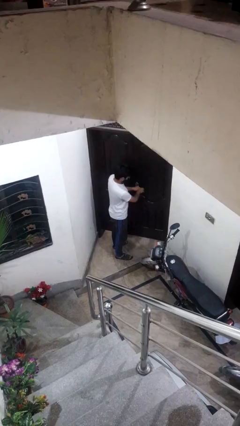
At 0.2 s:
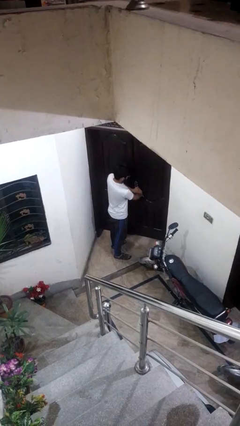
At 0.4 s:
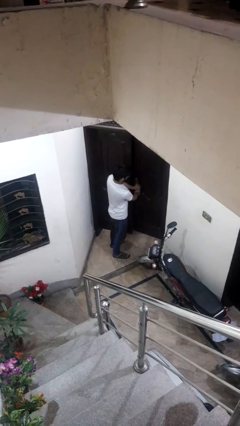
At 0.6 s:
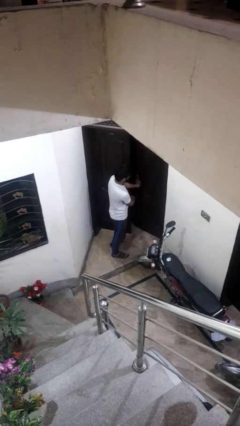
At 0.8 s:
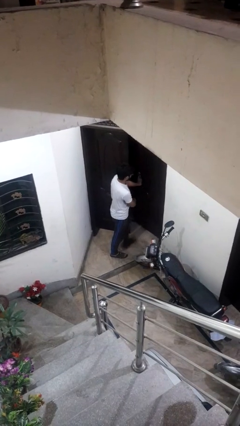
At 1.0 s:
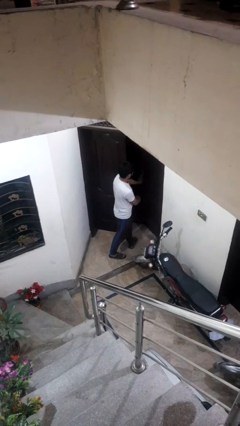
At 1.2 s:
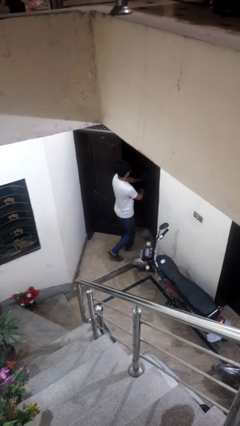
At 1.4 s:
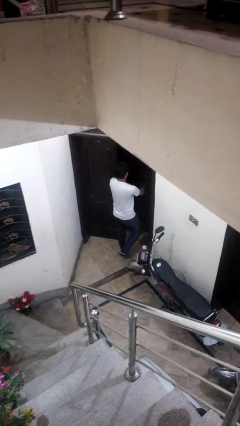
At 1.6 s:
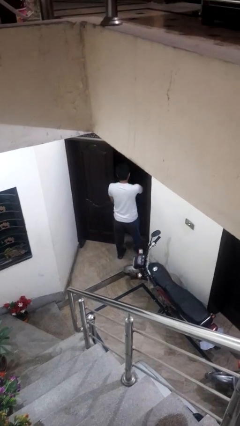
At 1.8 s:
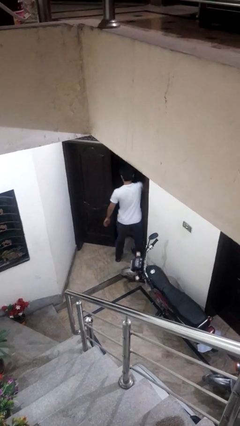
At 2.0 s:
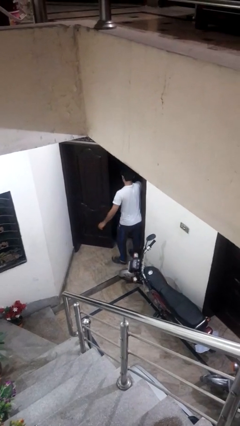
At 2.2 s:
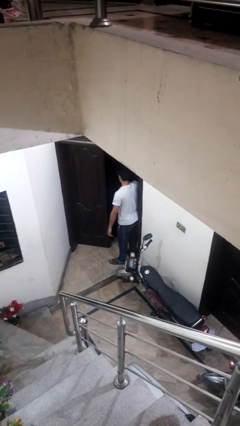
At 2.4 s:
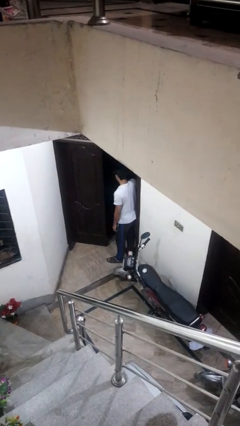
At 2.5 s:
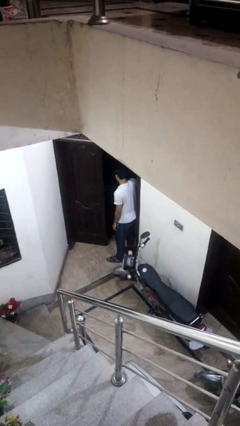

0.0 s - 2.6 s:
person opens facility door

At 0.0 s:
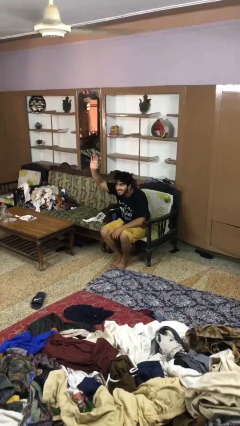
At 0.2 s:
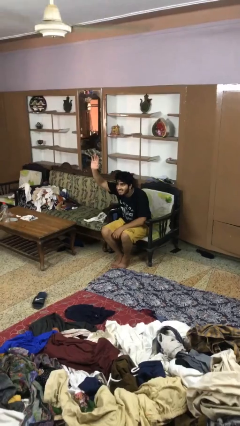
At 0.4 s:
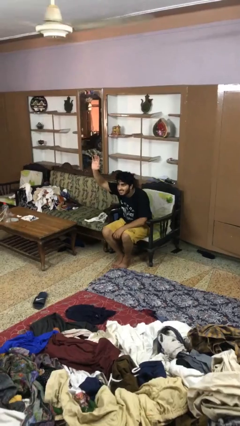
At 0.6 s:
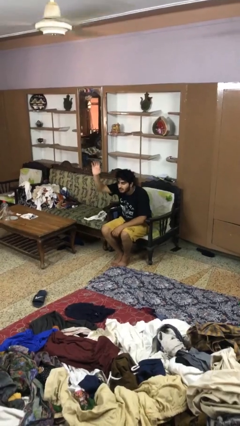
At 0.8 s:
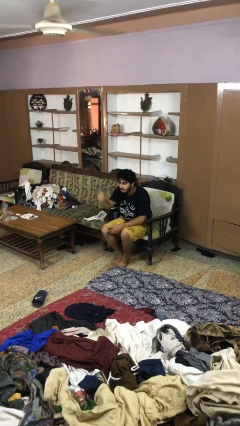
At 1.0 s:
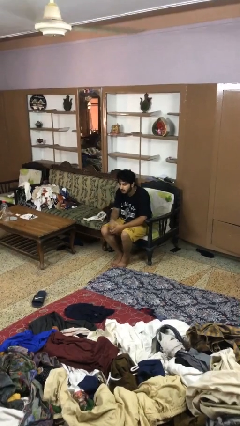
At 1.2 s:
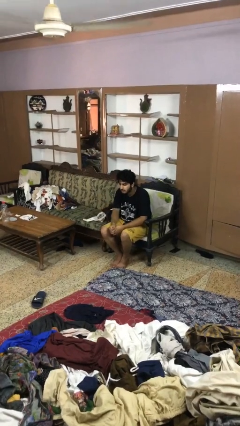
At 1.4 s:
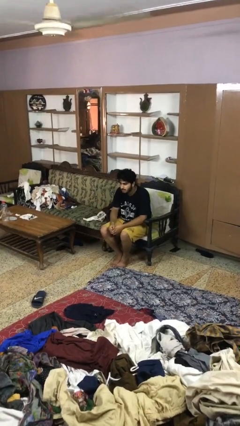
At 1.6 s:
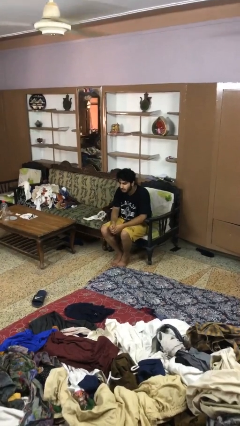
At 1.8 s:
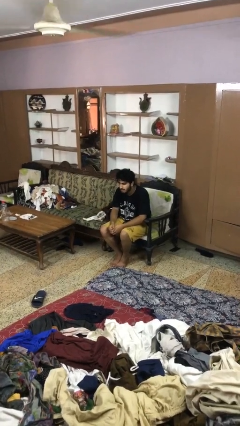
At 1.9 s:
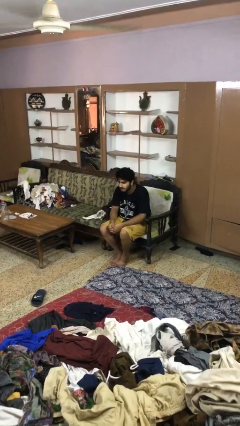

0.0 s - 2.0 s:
person gestures lower hand

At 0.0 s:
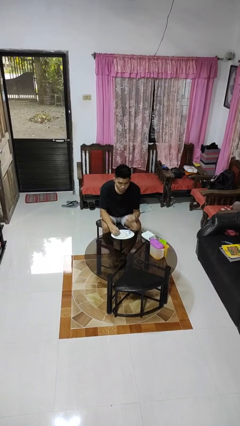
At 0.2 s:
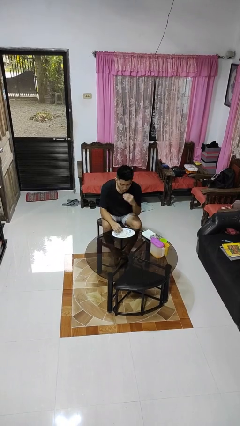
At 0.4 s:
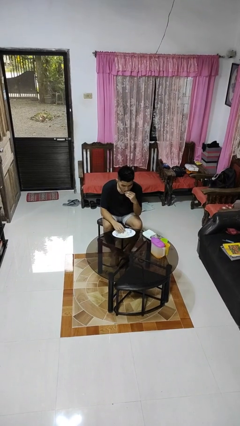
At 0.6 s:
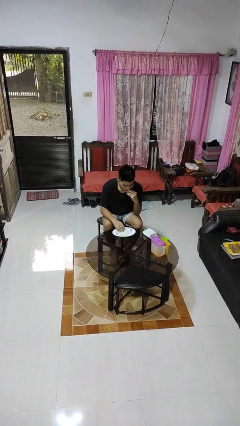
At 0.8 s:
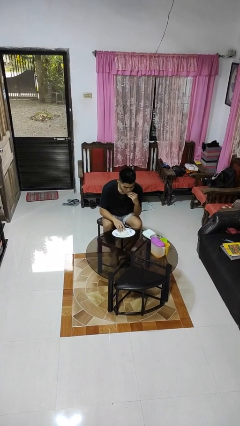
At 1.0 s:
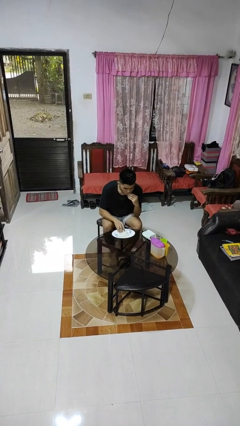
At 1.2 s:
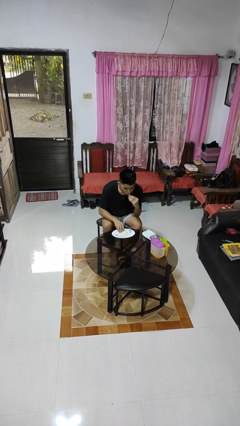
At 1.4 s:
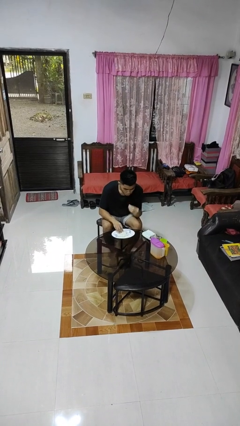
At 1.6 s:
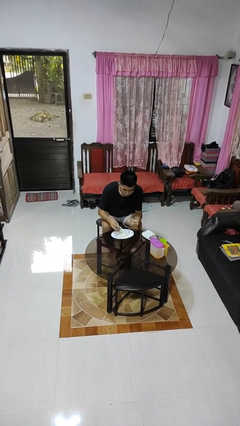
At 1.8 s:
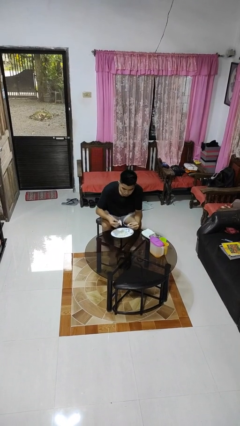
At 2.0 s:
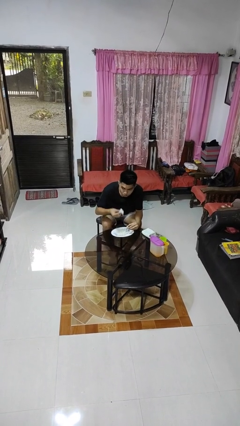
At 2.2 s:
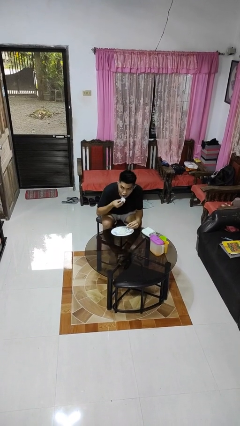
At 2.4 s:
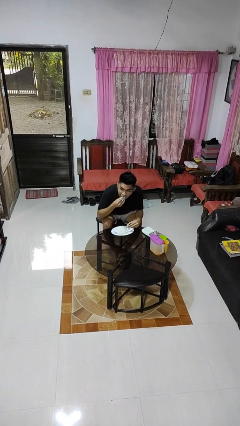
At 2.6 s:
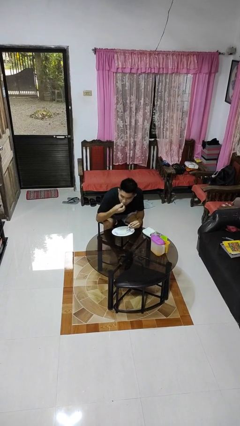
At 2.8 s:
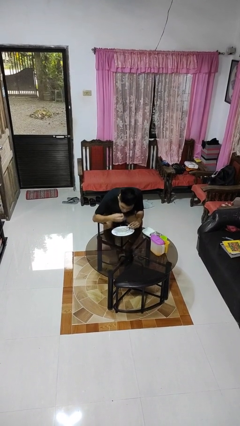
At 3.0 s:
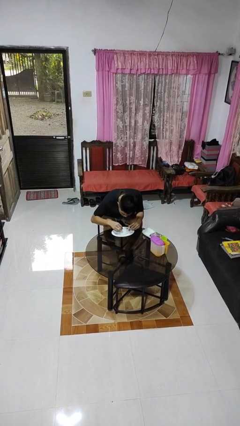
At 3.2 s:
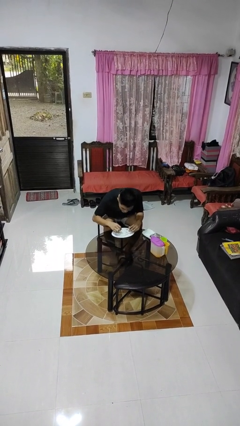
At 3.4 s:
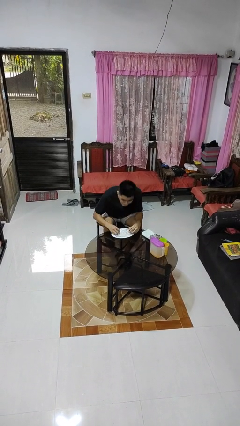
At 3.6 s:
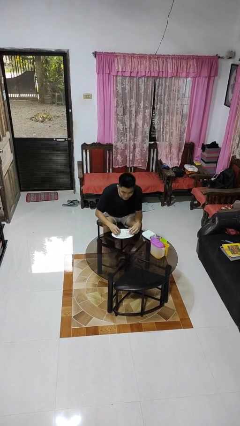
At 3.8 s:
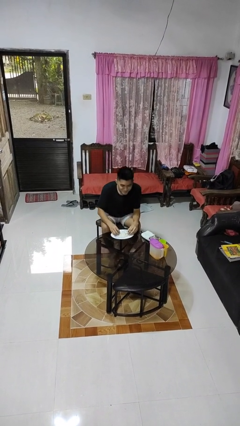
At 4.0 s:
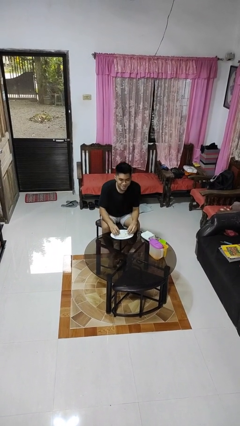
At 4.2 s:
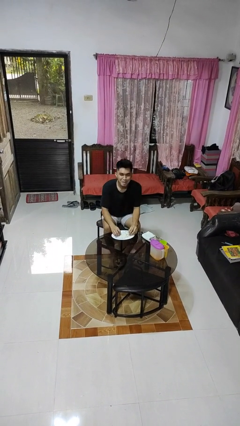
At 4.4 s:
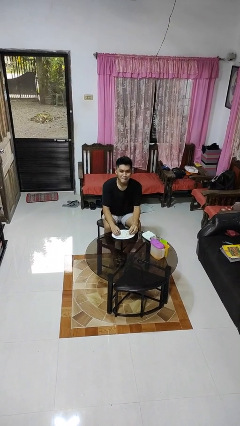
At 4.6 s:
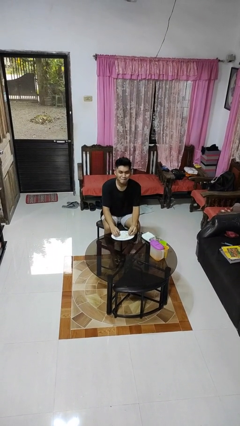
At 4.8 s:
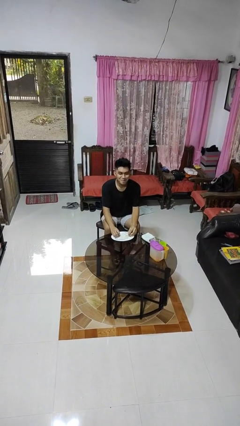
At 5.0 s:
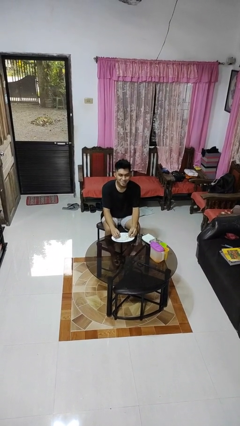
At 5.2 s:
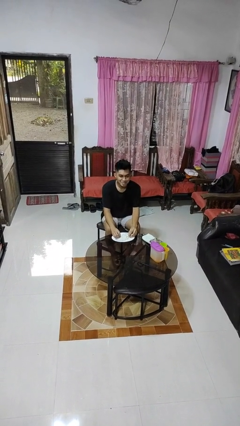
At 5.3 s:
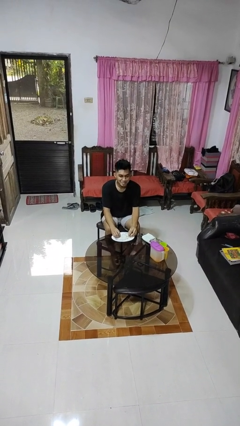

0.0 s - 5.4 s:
person eats with hands

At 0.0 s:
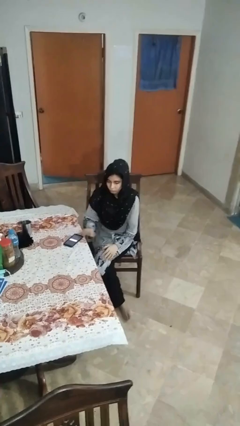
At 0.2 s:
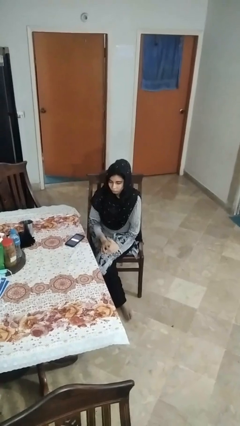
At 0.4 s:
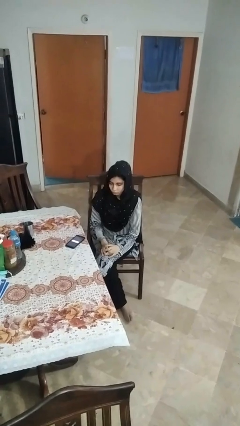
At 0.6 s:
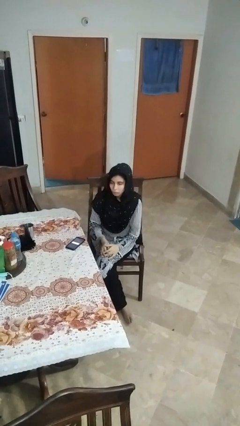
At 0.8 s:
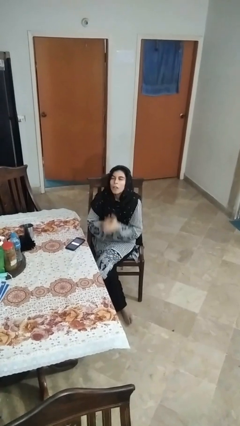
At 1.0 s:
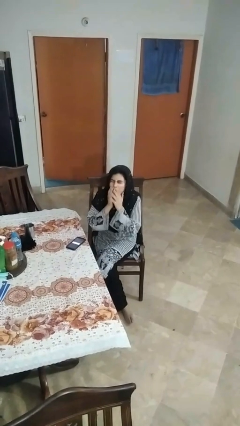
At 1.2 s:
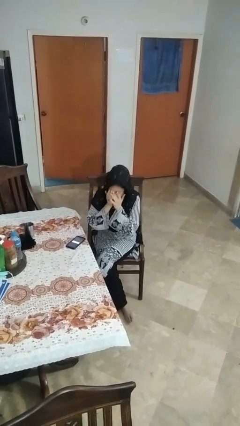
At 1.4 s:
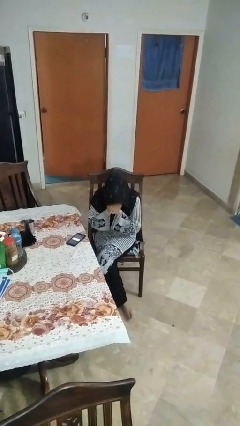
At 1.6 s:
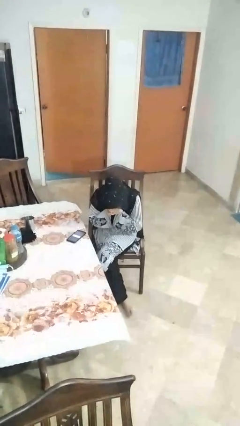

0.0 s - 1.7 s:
person sneezes into hand

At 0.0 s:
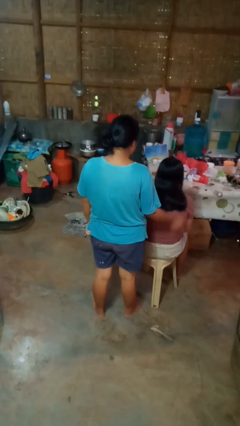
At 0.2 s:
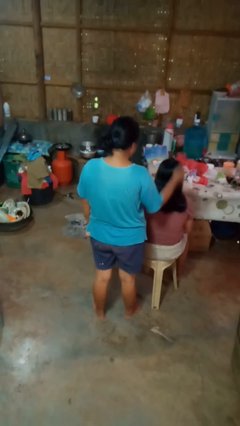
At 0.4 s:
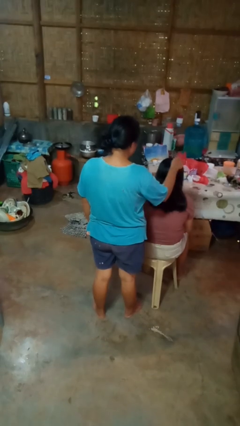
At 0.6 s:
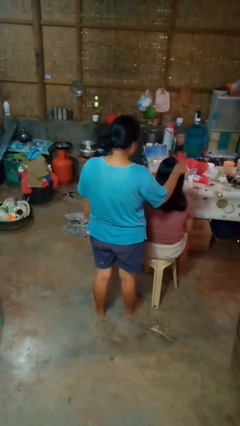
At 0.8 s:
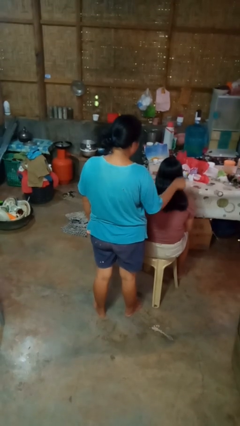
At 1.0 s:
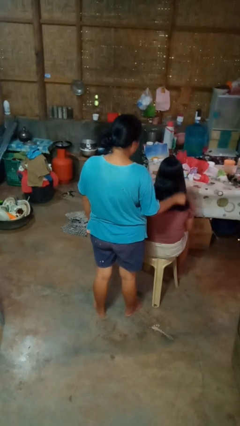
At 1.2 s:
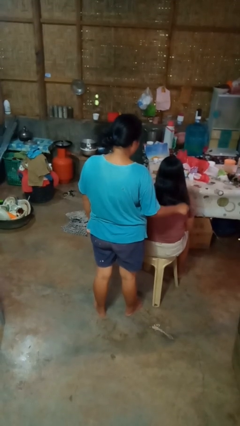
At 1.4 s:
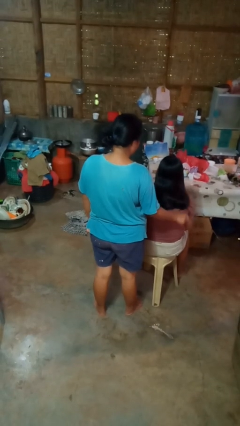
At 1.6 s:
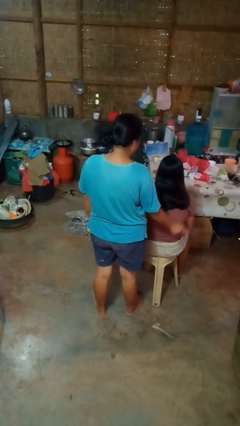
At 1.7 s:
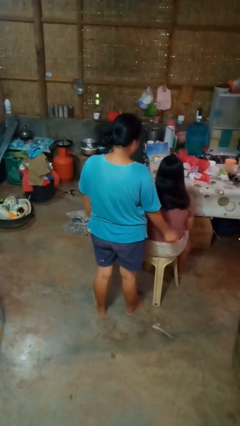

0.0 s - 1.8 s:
person brushes hair of person

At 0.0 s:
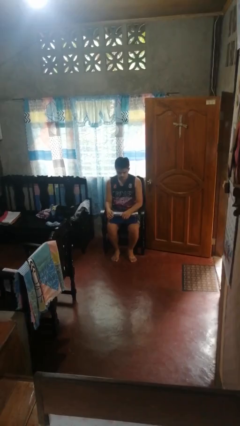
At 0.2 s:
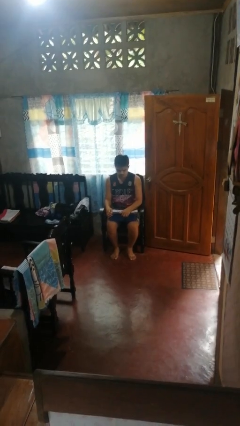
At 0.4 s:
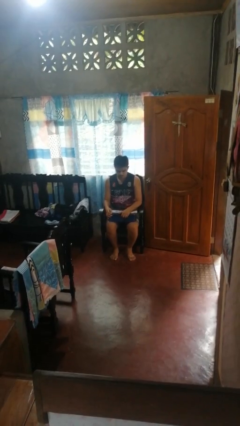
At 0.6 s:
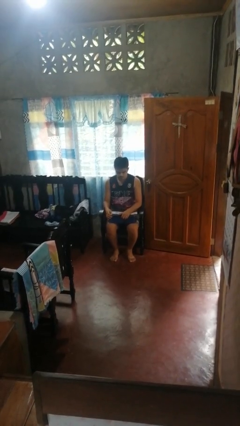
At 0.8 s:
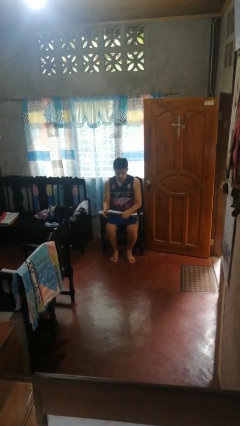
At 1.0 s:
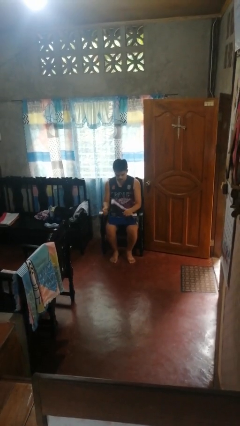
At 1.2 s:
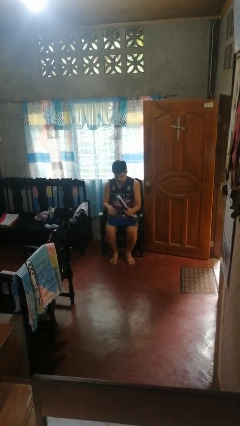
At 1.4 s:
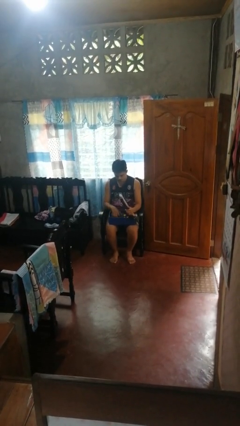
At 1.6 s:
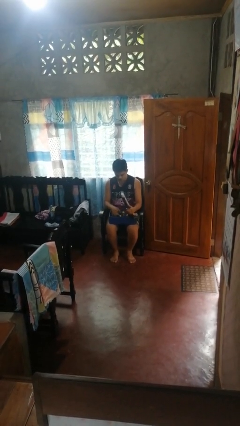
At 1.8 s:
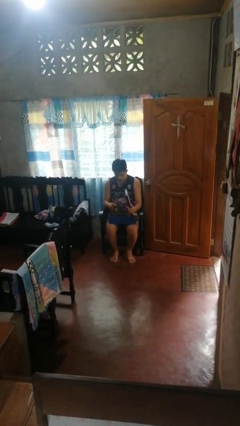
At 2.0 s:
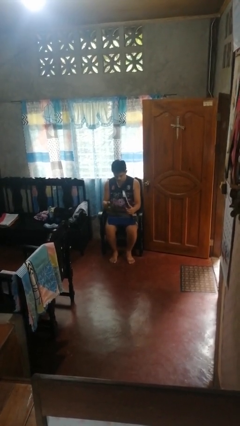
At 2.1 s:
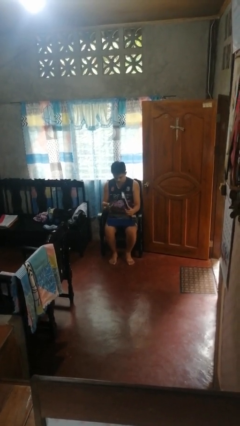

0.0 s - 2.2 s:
person takes object from box

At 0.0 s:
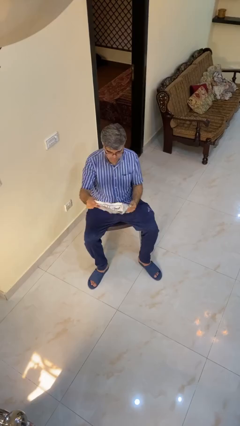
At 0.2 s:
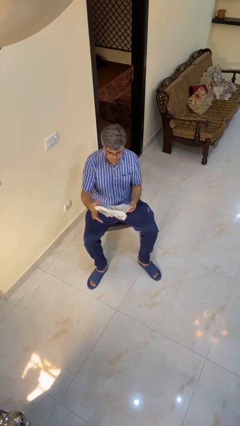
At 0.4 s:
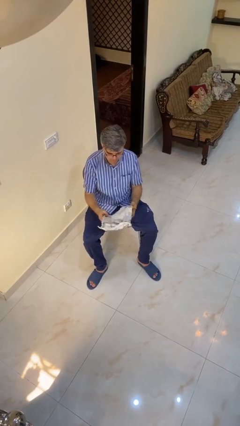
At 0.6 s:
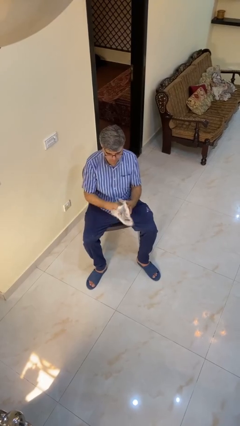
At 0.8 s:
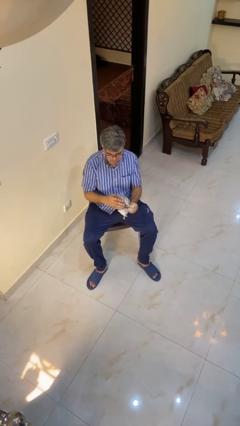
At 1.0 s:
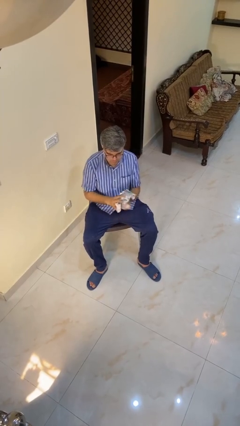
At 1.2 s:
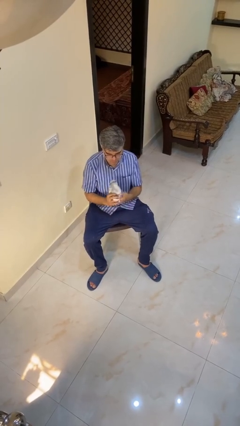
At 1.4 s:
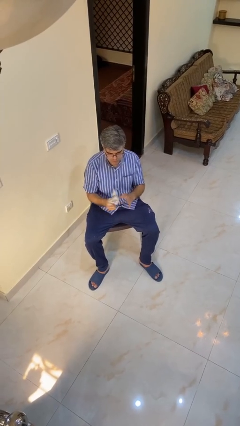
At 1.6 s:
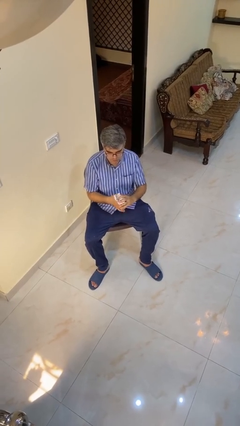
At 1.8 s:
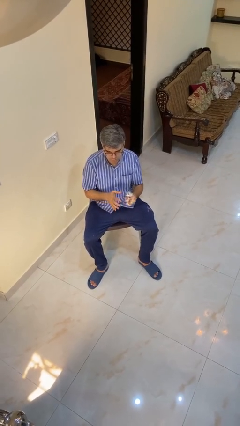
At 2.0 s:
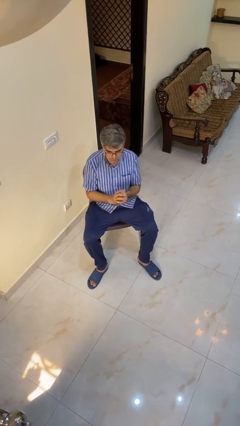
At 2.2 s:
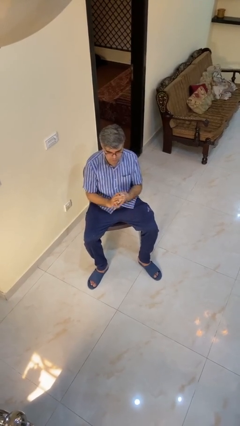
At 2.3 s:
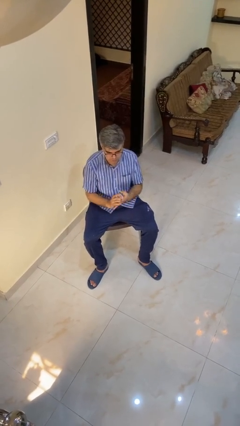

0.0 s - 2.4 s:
person crumples paper
